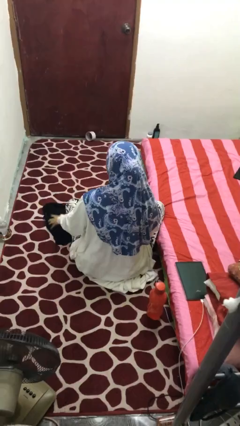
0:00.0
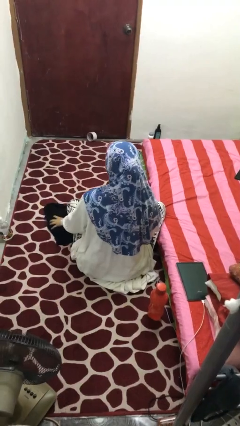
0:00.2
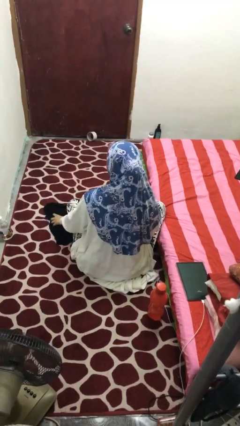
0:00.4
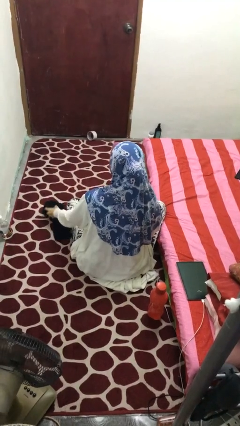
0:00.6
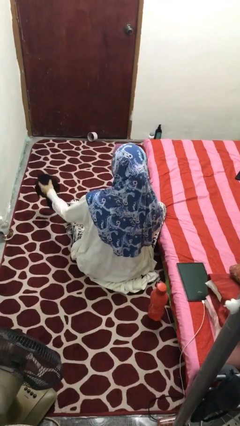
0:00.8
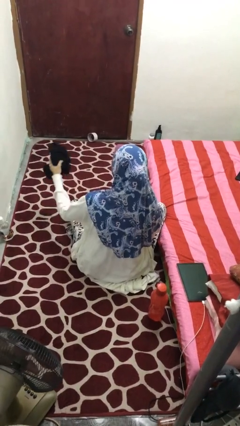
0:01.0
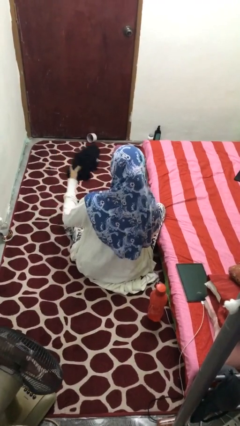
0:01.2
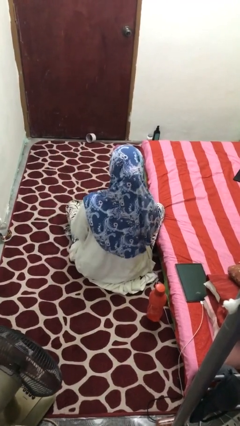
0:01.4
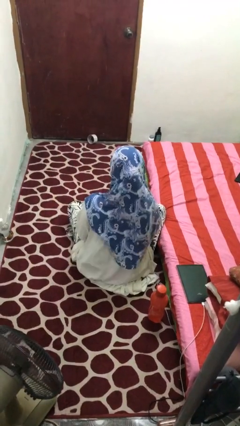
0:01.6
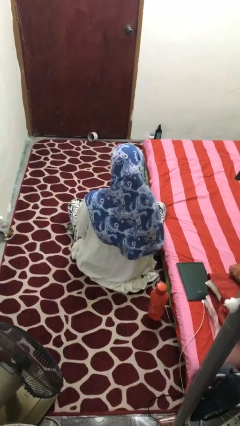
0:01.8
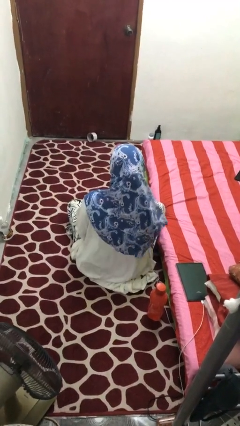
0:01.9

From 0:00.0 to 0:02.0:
person picks up object from floor

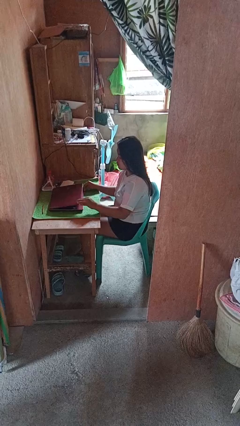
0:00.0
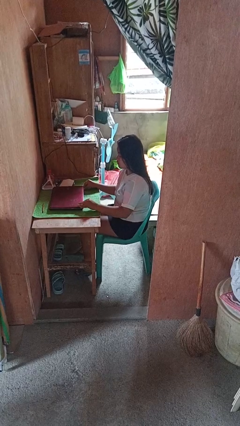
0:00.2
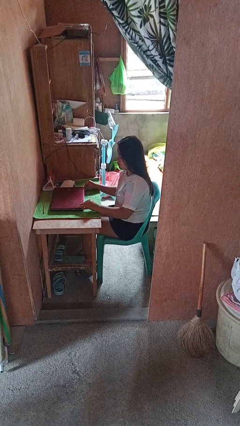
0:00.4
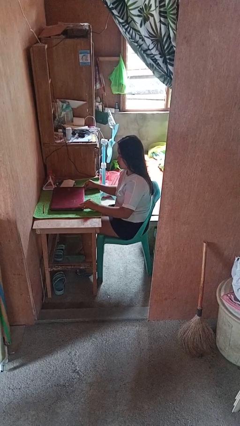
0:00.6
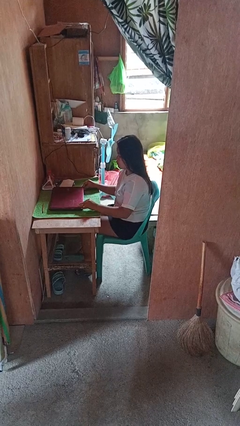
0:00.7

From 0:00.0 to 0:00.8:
person closes laptop

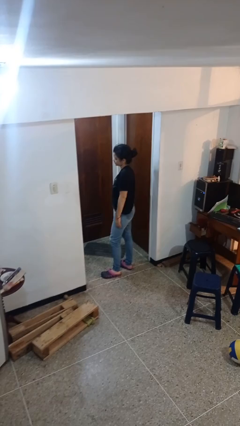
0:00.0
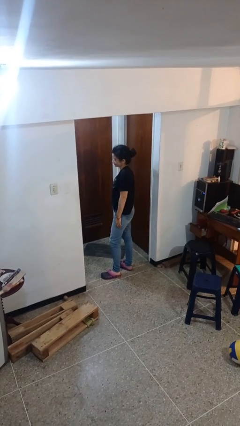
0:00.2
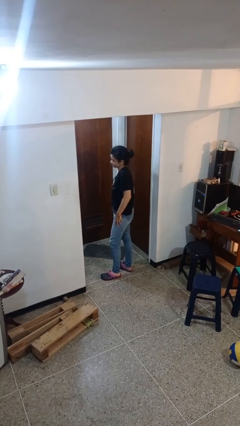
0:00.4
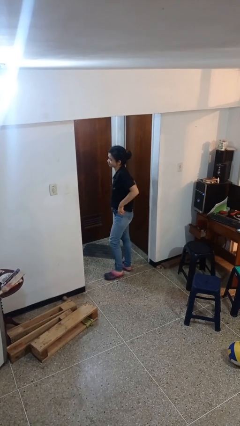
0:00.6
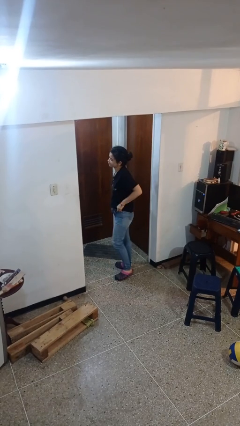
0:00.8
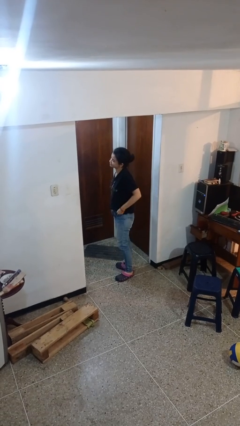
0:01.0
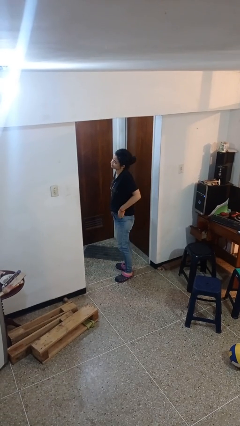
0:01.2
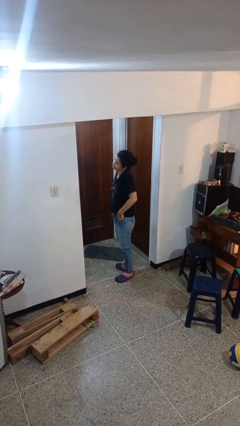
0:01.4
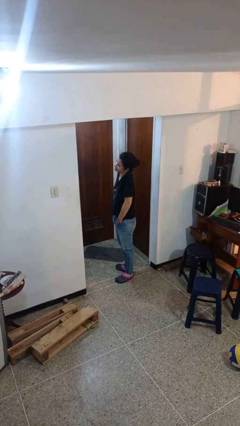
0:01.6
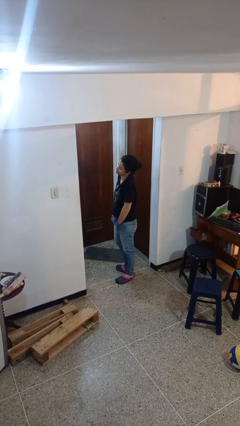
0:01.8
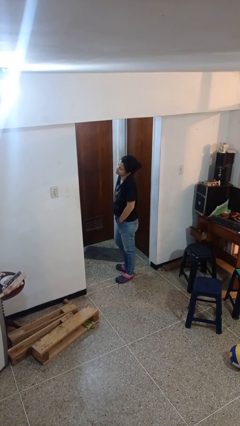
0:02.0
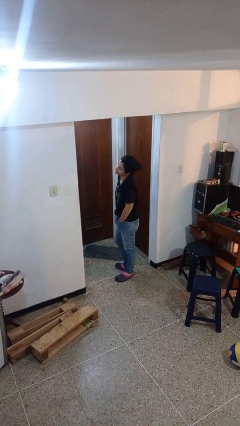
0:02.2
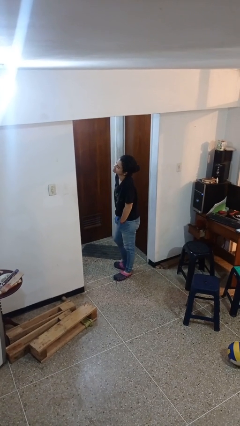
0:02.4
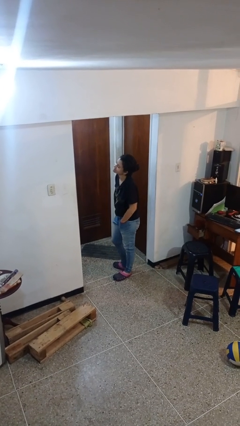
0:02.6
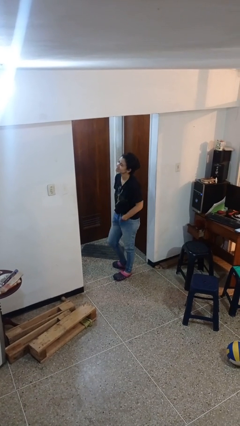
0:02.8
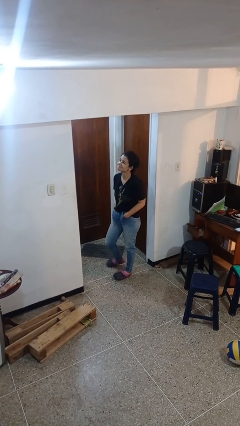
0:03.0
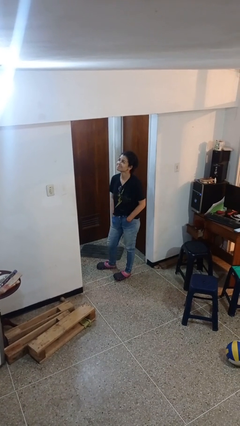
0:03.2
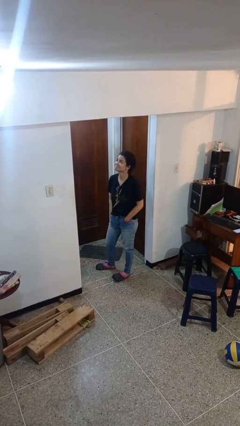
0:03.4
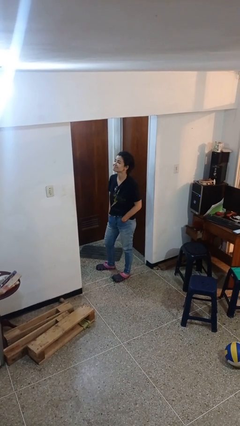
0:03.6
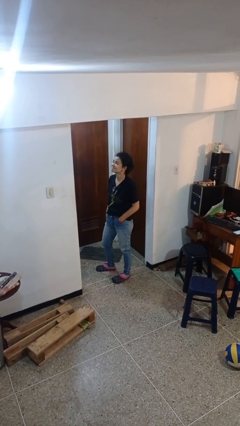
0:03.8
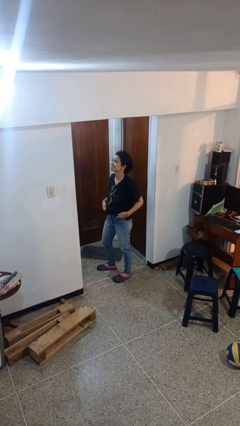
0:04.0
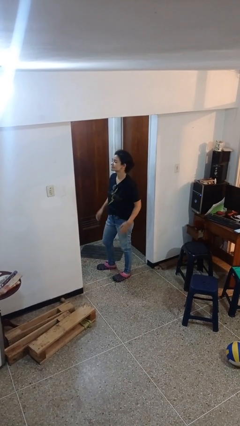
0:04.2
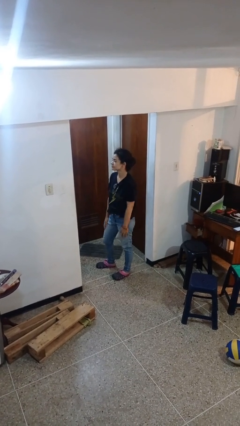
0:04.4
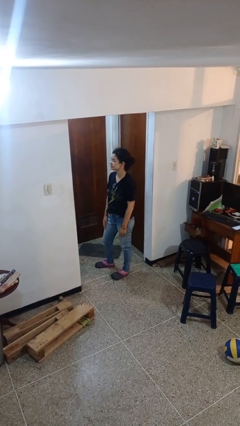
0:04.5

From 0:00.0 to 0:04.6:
person puts hands in back pockets

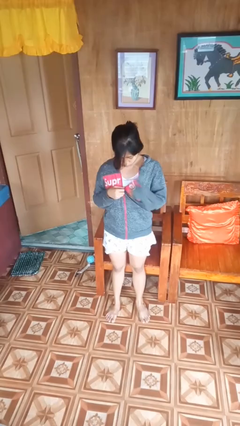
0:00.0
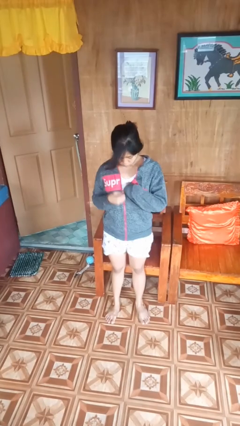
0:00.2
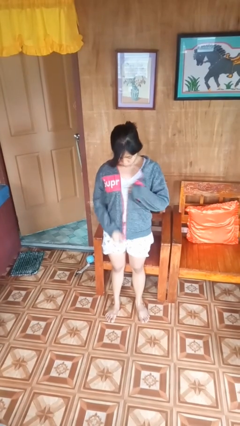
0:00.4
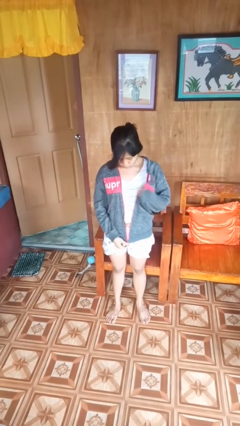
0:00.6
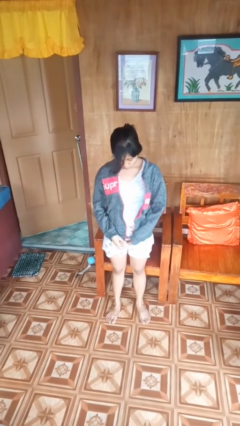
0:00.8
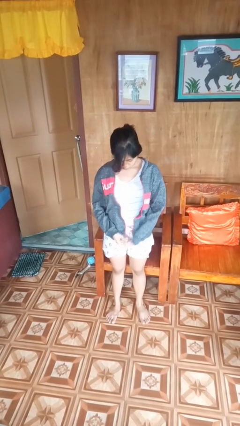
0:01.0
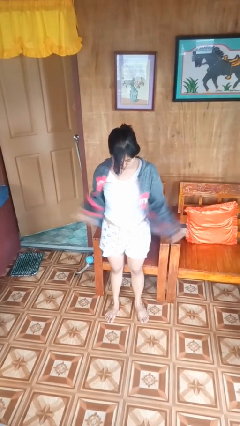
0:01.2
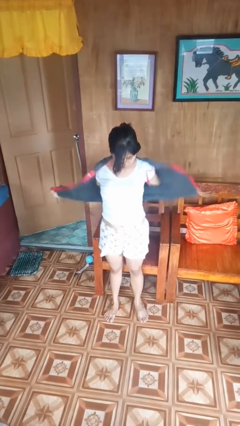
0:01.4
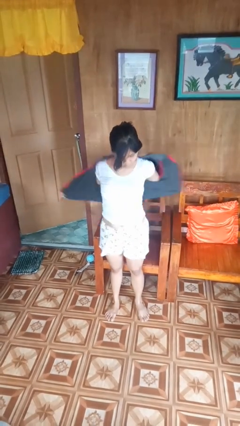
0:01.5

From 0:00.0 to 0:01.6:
person unzips jacket

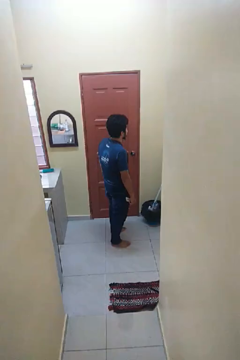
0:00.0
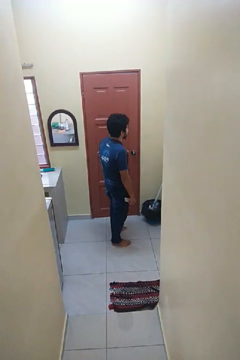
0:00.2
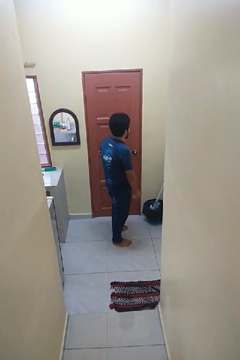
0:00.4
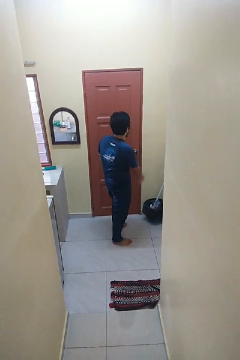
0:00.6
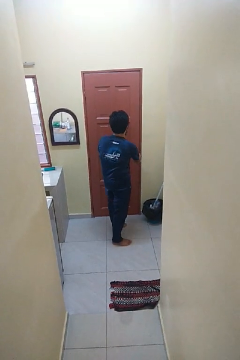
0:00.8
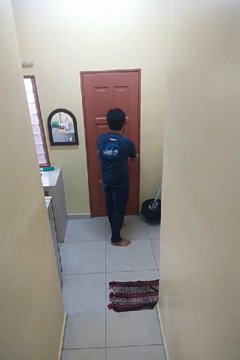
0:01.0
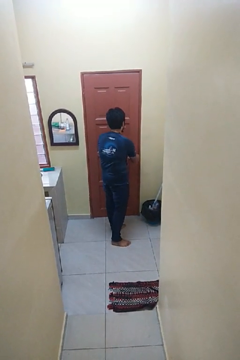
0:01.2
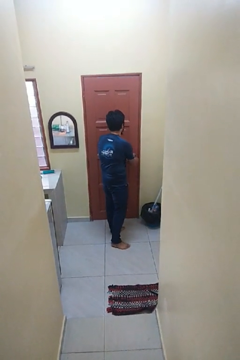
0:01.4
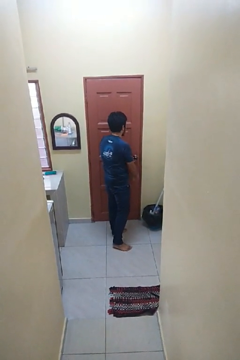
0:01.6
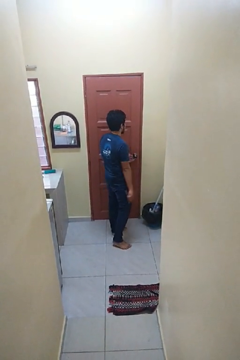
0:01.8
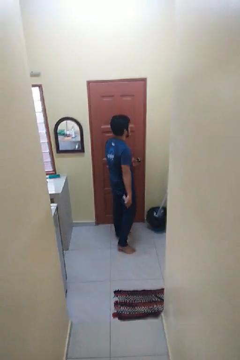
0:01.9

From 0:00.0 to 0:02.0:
person unlocks door with keys

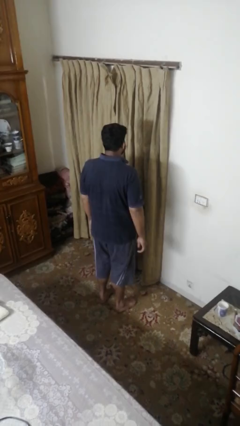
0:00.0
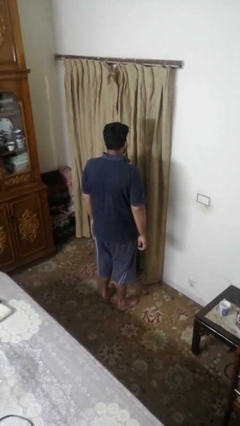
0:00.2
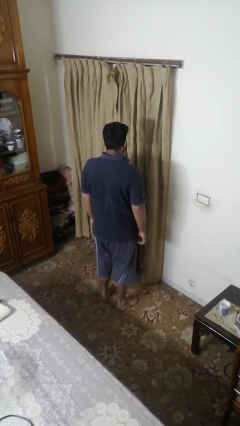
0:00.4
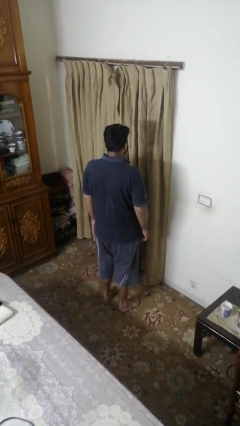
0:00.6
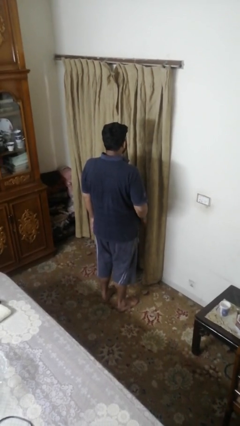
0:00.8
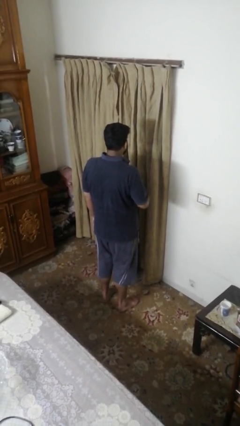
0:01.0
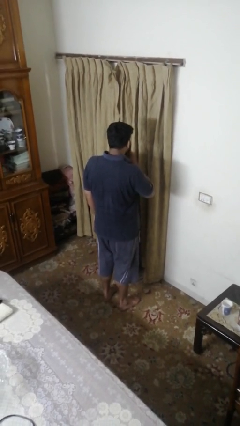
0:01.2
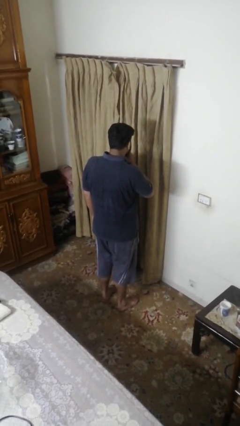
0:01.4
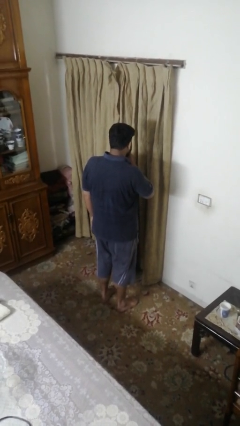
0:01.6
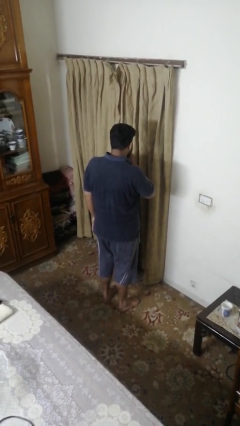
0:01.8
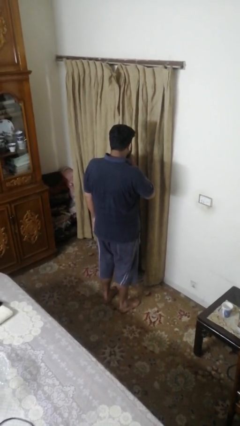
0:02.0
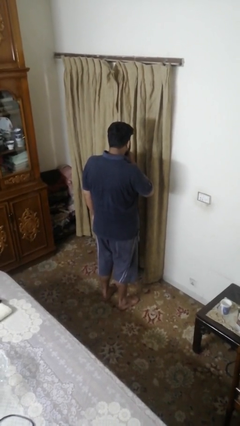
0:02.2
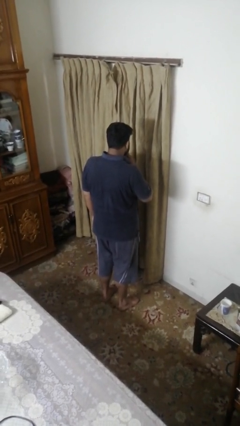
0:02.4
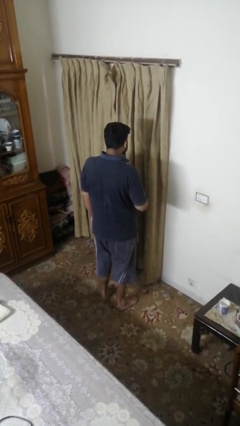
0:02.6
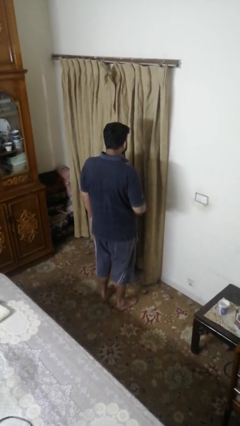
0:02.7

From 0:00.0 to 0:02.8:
person gestures be quiet

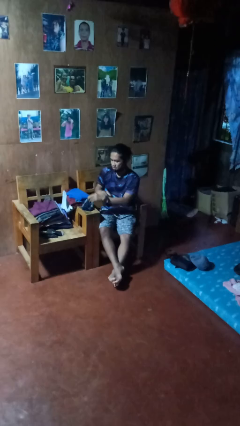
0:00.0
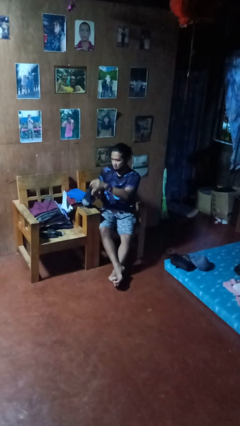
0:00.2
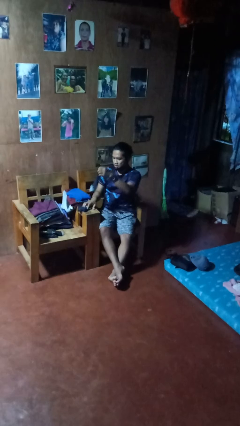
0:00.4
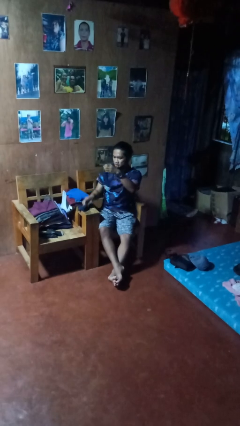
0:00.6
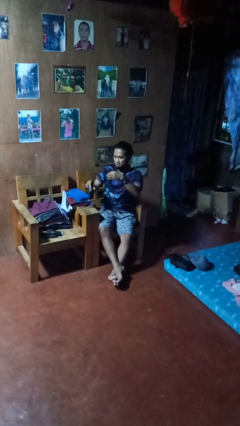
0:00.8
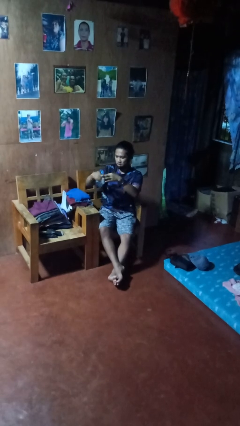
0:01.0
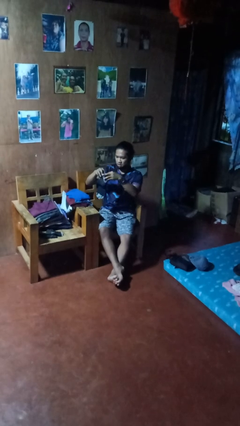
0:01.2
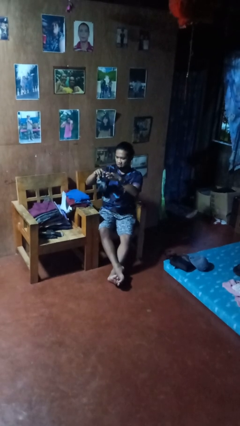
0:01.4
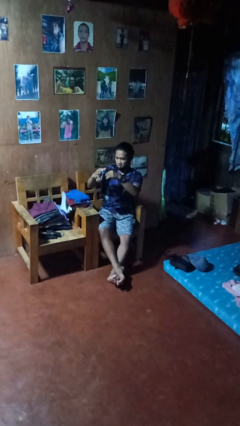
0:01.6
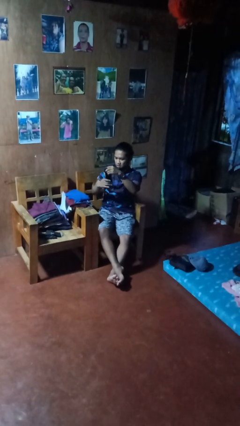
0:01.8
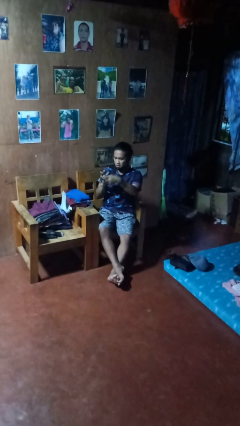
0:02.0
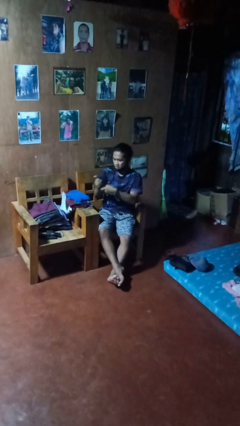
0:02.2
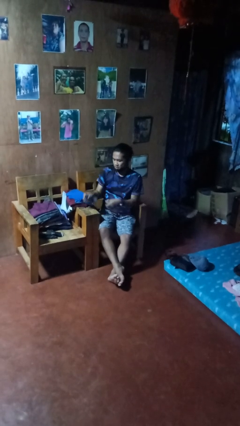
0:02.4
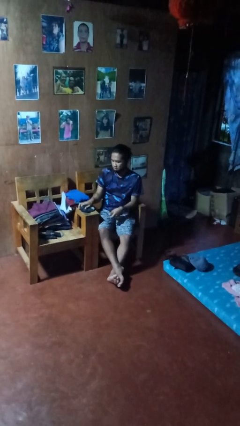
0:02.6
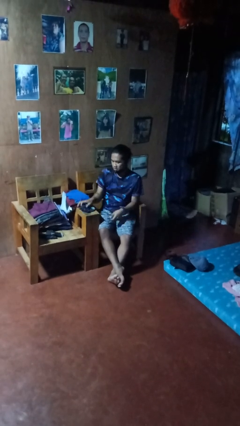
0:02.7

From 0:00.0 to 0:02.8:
person folds socks

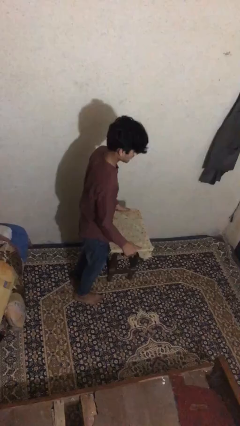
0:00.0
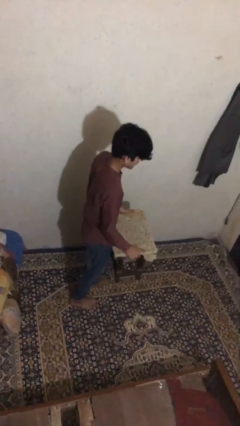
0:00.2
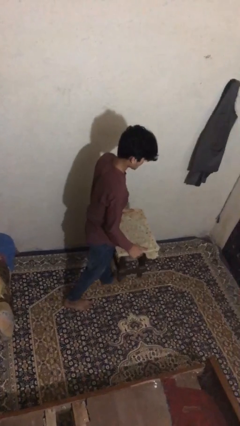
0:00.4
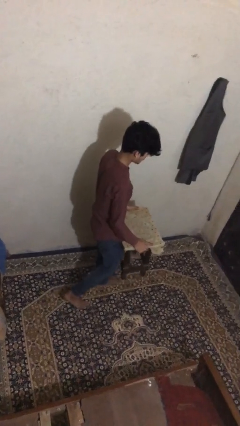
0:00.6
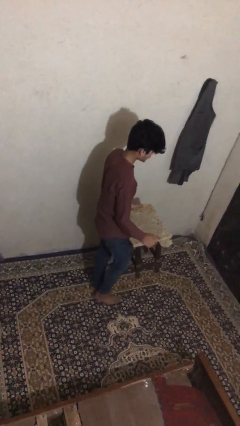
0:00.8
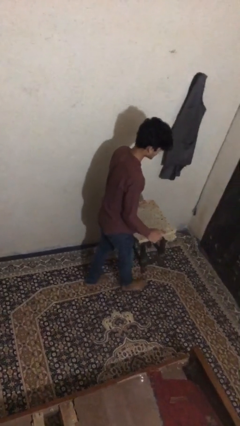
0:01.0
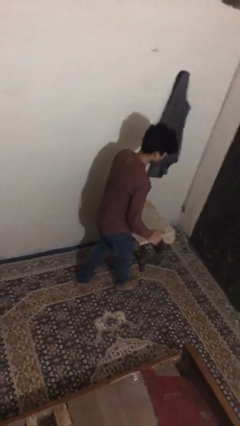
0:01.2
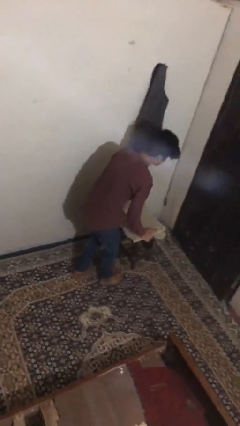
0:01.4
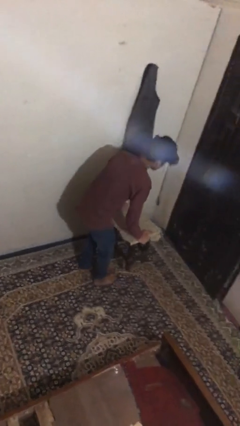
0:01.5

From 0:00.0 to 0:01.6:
person carries heavy object
